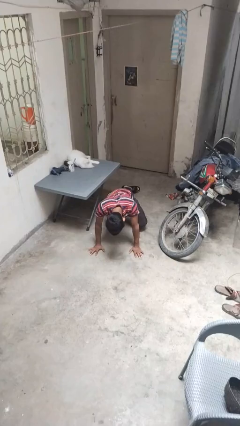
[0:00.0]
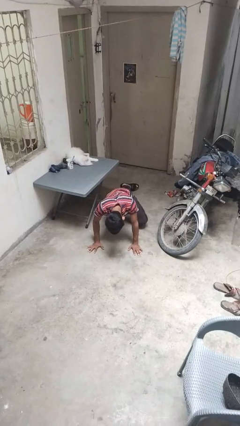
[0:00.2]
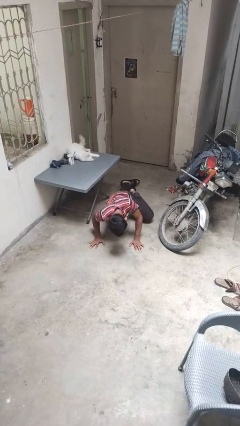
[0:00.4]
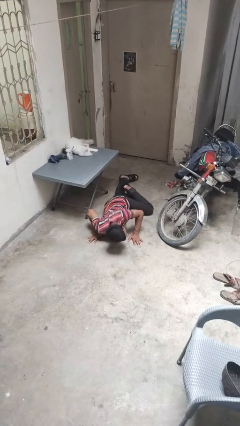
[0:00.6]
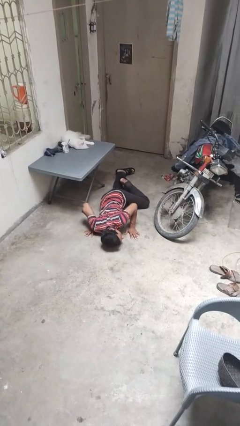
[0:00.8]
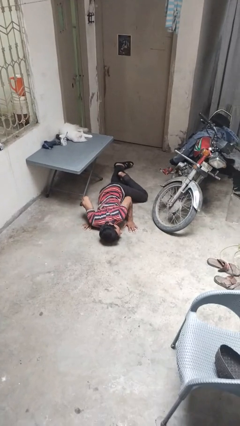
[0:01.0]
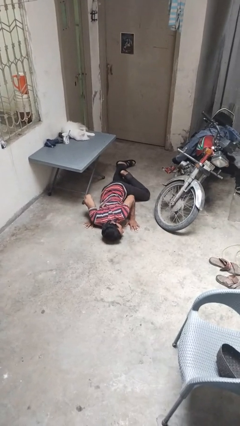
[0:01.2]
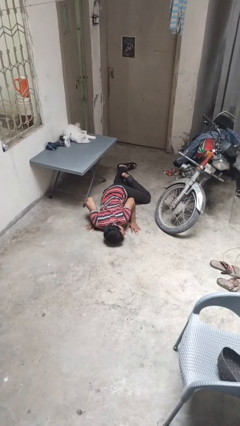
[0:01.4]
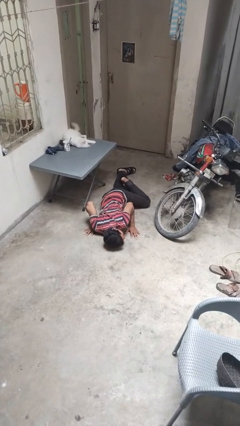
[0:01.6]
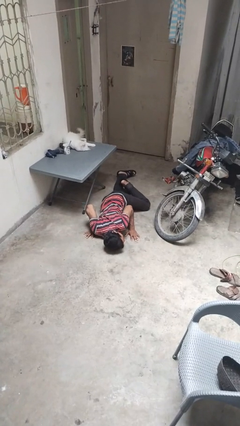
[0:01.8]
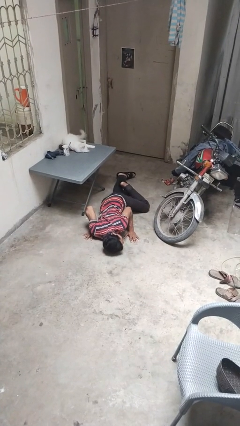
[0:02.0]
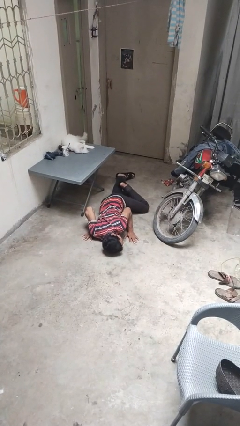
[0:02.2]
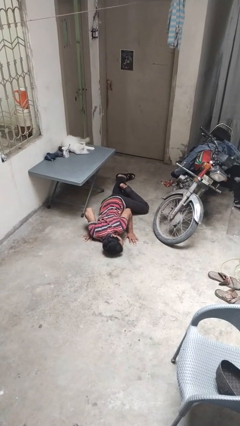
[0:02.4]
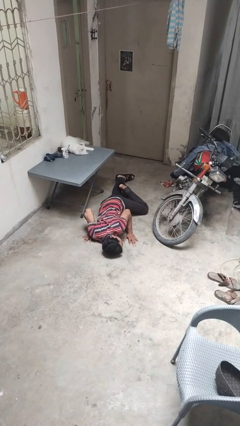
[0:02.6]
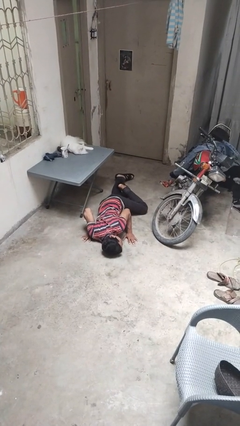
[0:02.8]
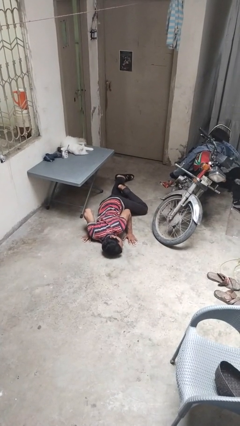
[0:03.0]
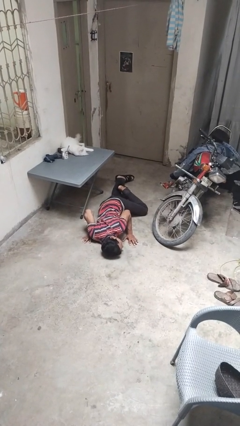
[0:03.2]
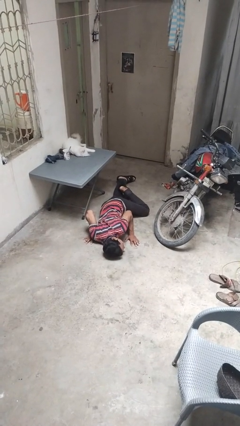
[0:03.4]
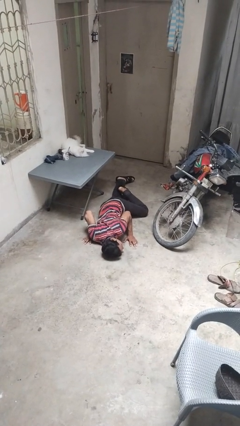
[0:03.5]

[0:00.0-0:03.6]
person lies down on floor

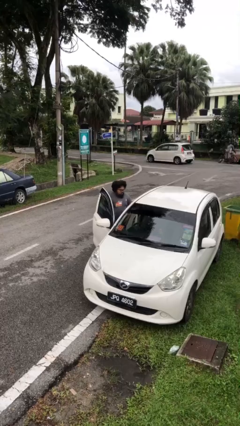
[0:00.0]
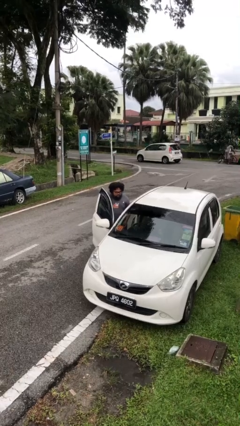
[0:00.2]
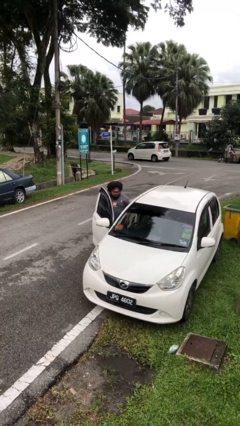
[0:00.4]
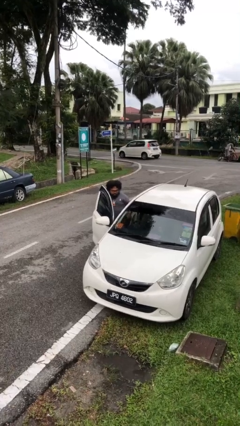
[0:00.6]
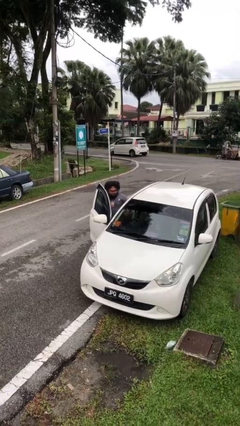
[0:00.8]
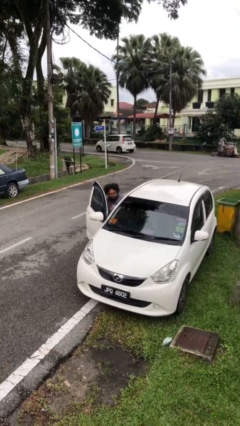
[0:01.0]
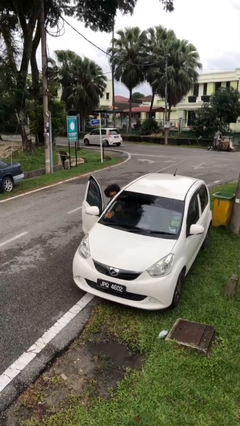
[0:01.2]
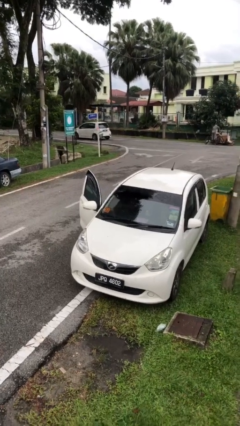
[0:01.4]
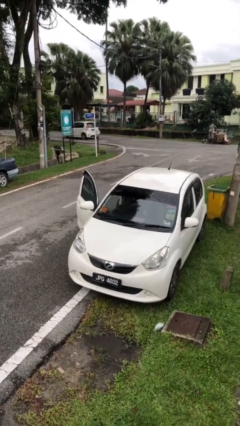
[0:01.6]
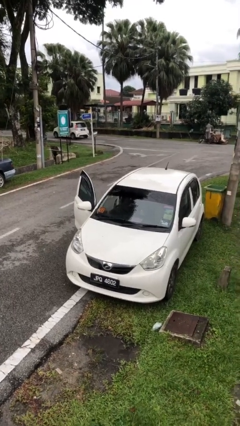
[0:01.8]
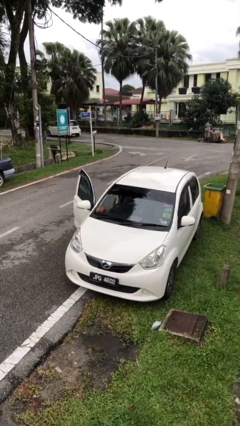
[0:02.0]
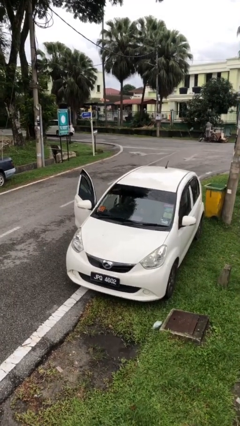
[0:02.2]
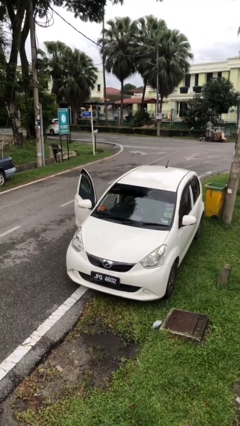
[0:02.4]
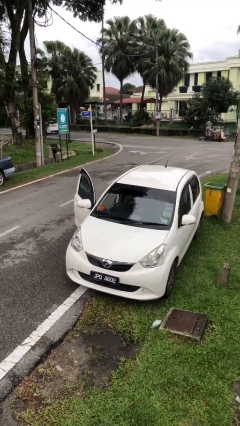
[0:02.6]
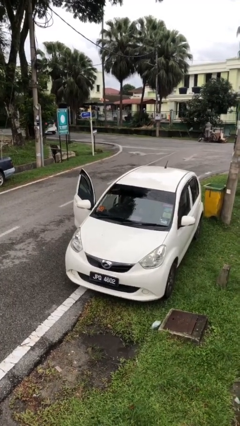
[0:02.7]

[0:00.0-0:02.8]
person enters car

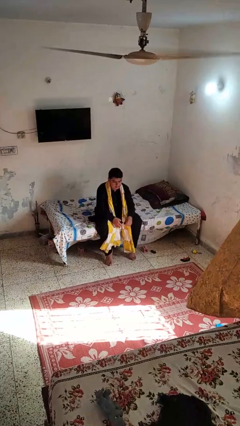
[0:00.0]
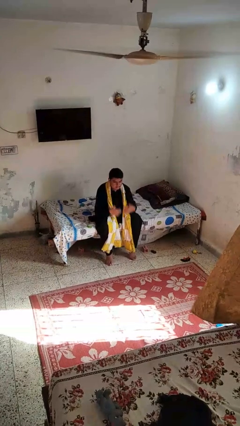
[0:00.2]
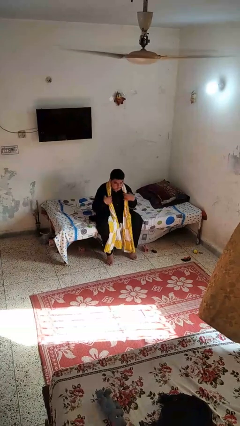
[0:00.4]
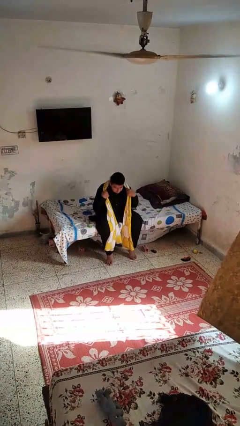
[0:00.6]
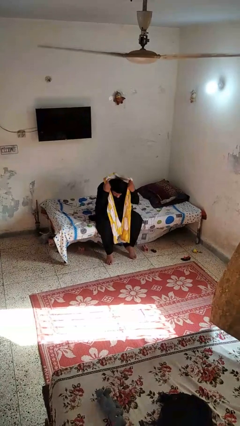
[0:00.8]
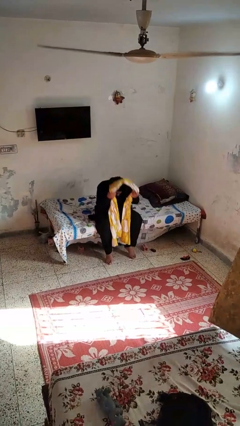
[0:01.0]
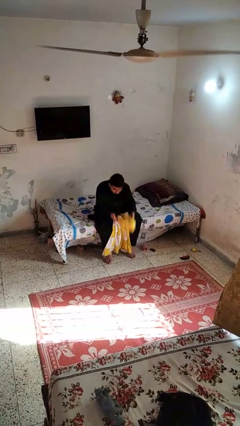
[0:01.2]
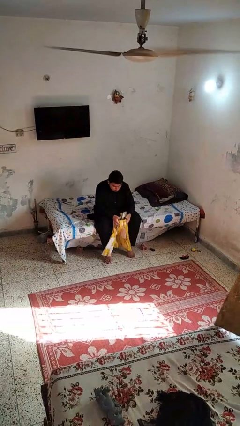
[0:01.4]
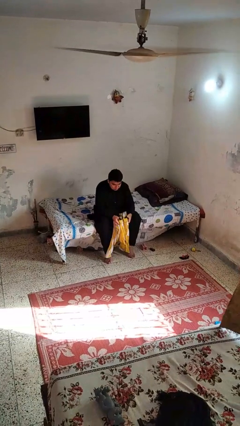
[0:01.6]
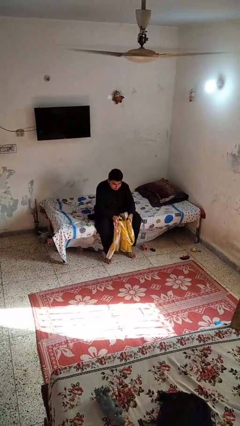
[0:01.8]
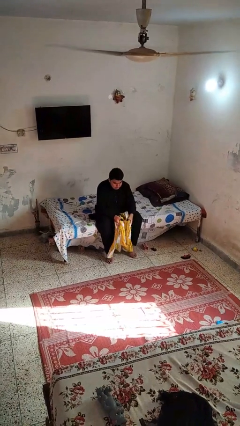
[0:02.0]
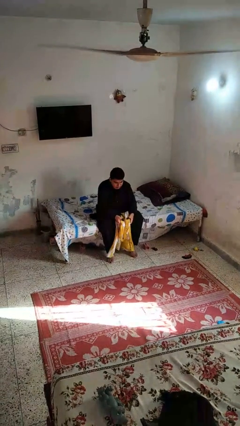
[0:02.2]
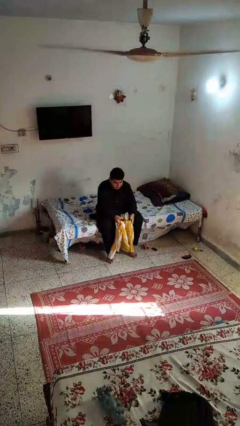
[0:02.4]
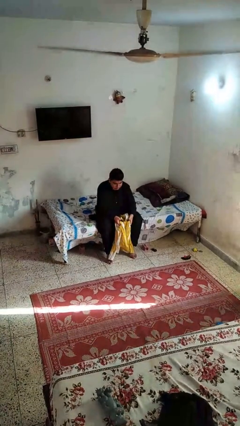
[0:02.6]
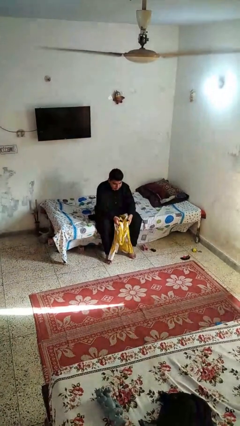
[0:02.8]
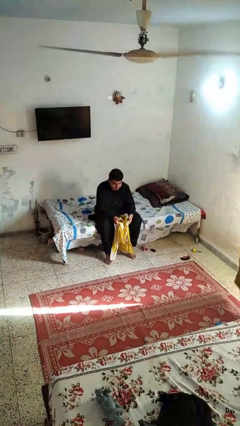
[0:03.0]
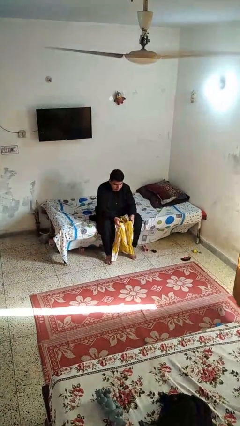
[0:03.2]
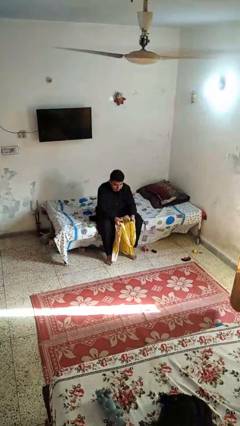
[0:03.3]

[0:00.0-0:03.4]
person takes off scarf

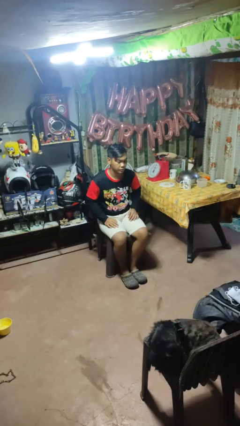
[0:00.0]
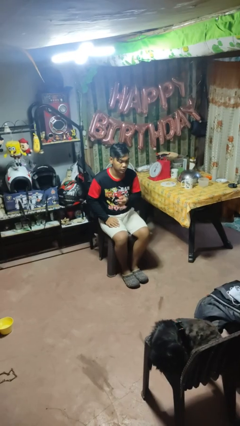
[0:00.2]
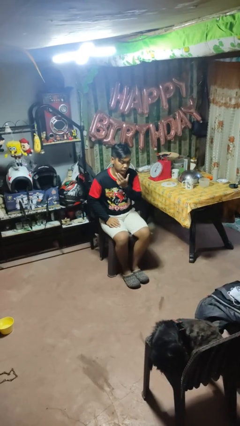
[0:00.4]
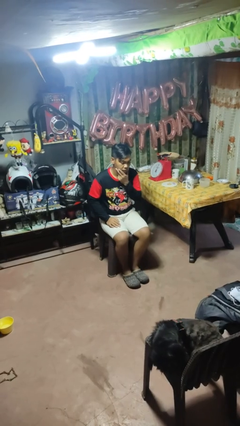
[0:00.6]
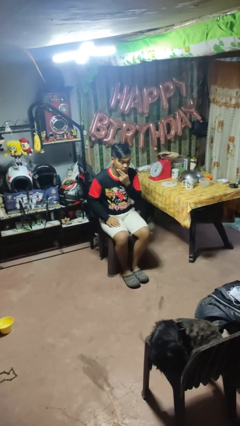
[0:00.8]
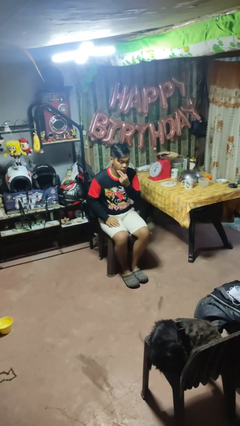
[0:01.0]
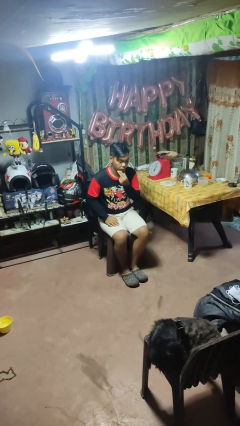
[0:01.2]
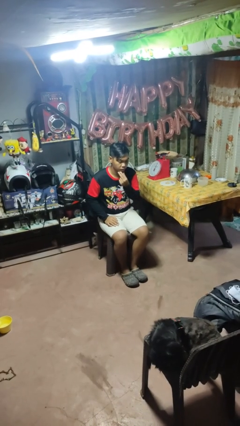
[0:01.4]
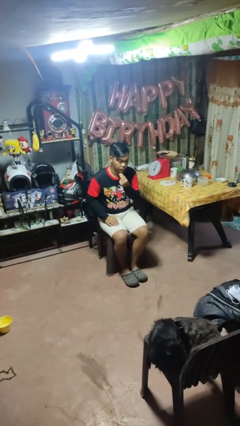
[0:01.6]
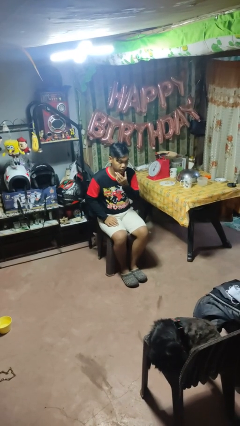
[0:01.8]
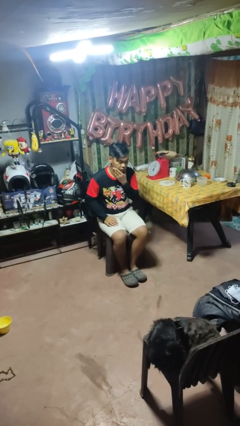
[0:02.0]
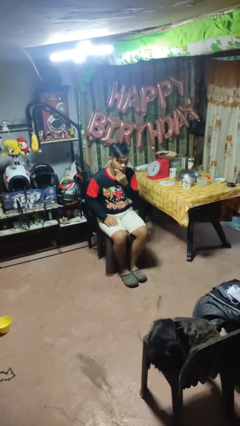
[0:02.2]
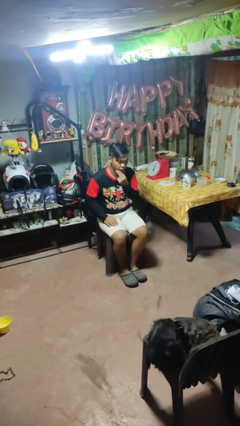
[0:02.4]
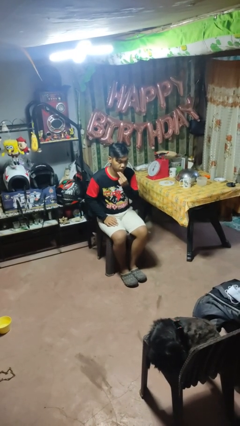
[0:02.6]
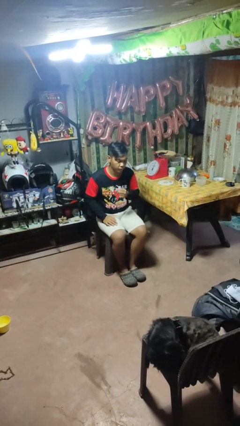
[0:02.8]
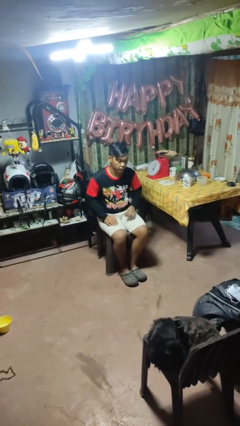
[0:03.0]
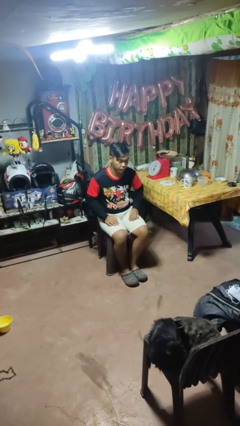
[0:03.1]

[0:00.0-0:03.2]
person strokes chin

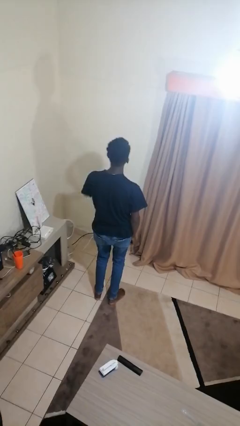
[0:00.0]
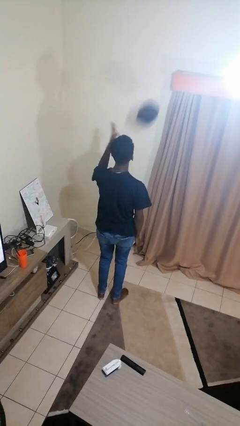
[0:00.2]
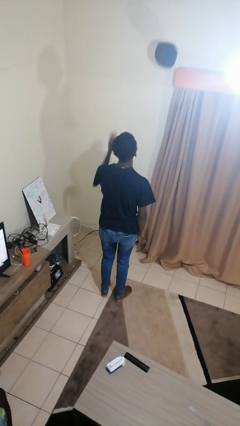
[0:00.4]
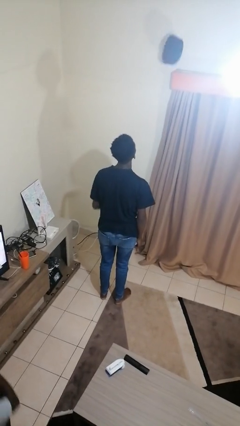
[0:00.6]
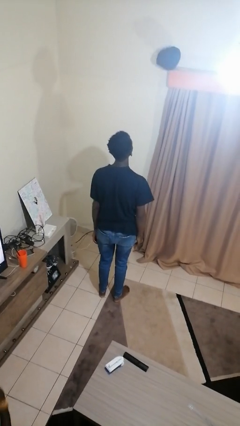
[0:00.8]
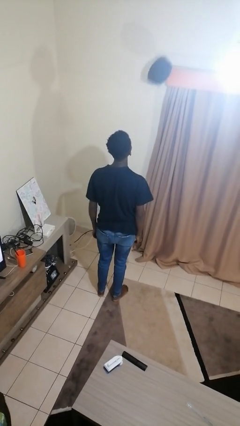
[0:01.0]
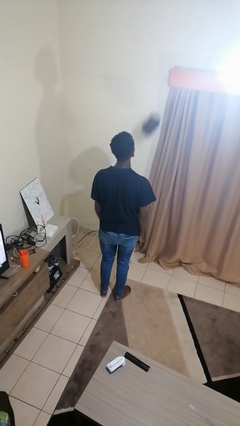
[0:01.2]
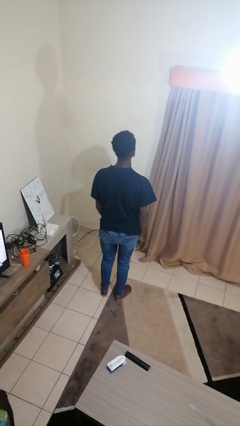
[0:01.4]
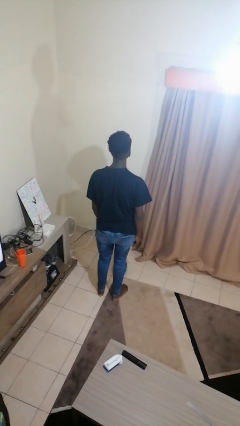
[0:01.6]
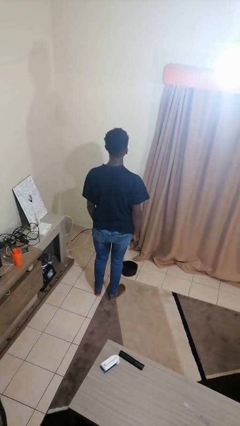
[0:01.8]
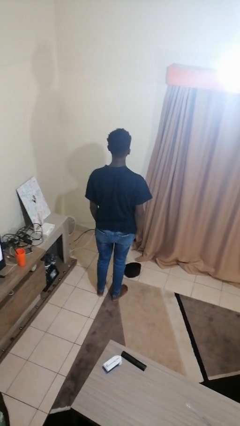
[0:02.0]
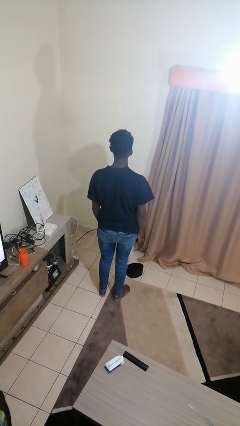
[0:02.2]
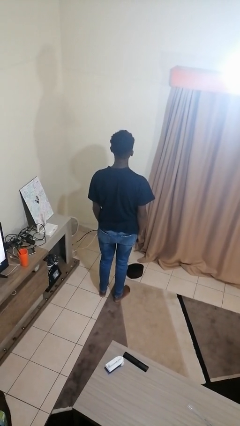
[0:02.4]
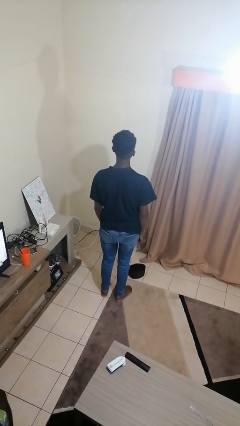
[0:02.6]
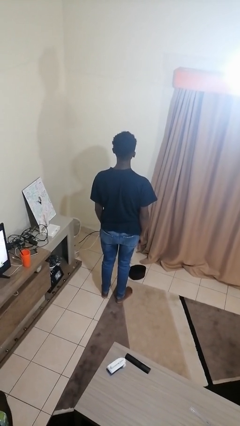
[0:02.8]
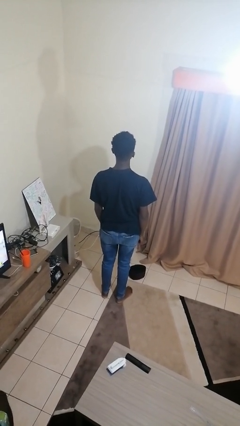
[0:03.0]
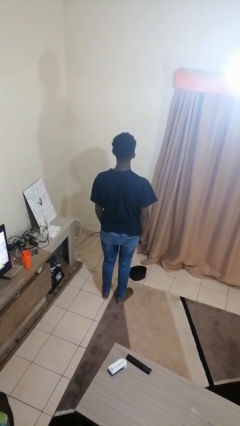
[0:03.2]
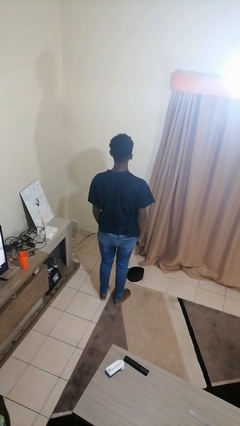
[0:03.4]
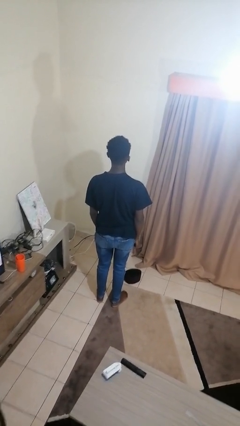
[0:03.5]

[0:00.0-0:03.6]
person throws object into air

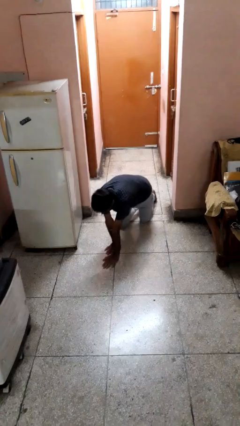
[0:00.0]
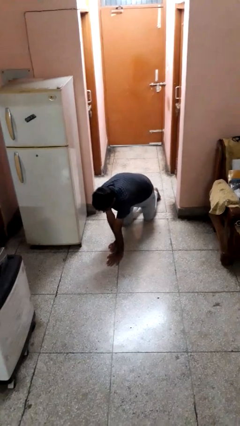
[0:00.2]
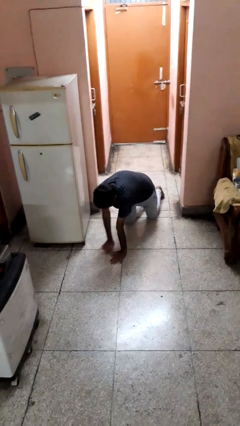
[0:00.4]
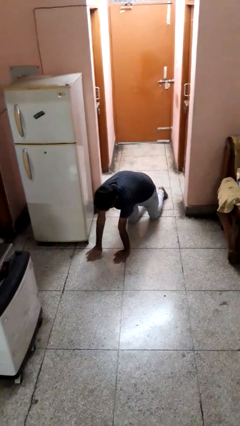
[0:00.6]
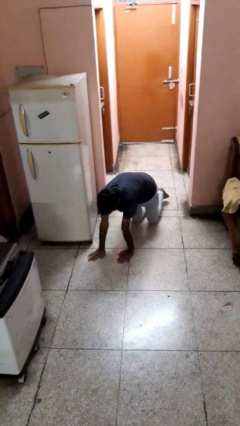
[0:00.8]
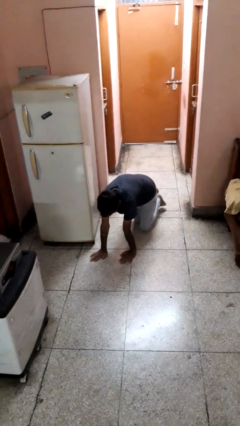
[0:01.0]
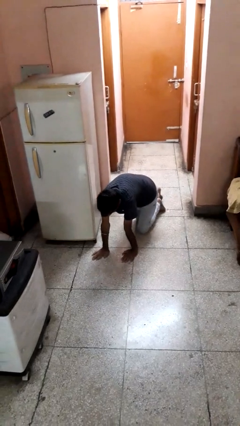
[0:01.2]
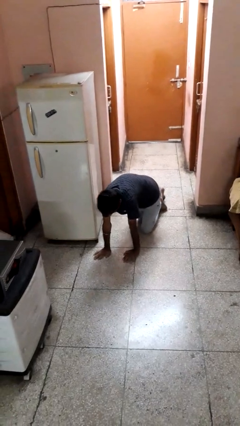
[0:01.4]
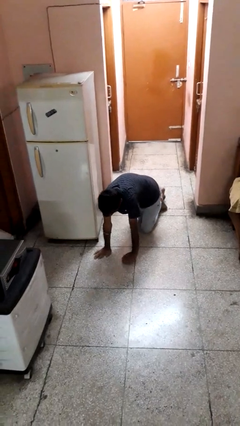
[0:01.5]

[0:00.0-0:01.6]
person crawls
